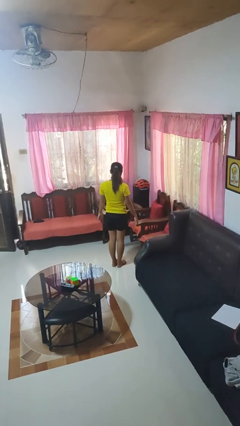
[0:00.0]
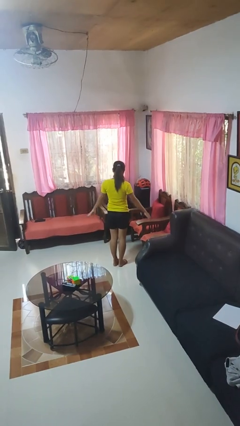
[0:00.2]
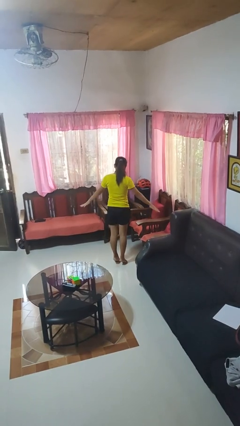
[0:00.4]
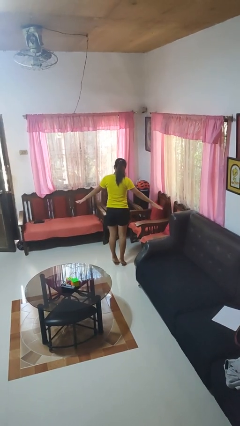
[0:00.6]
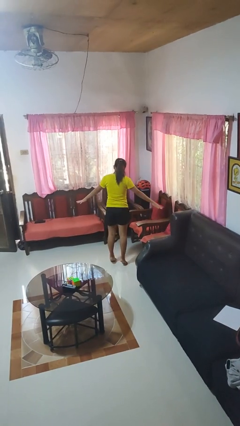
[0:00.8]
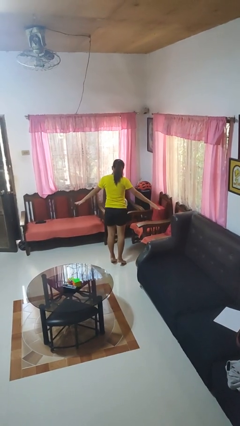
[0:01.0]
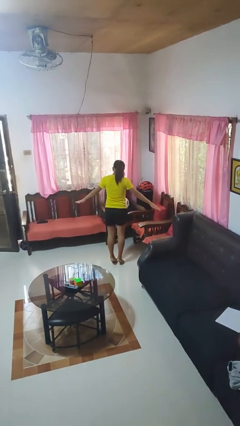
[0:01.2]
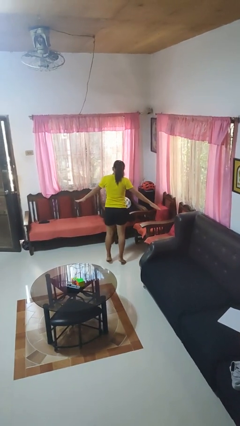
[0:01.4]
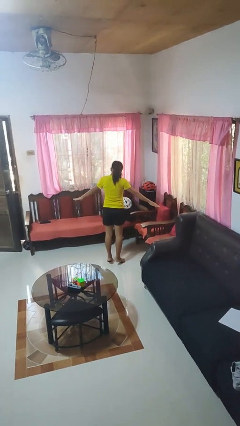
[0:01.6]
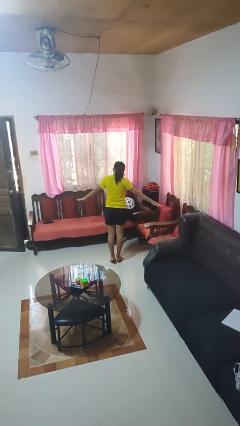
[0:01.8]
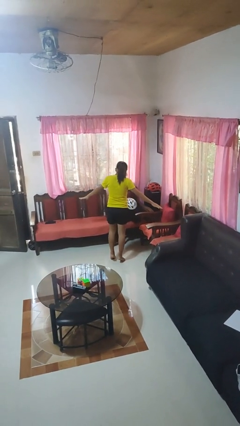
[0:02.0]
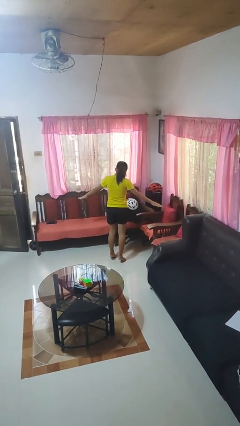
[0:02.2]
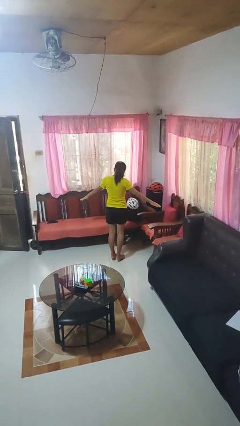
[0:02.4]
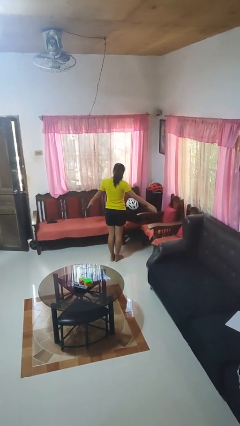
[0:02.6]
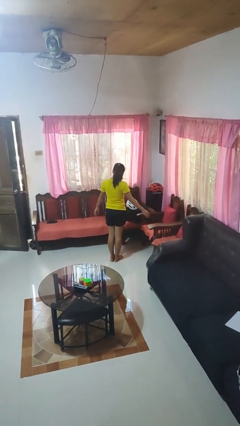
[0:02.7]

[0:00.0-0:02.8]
person walks tiptoe

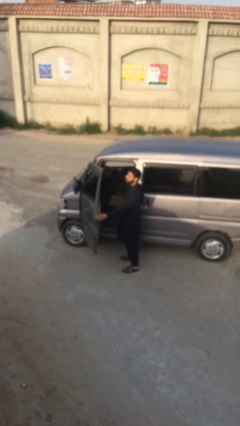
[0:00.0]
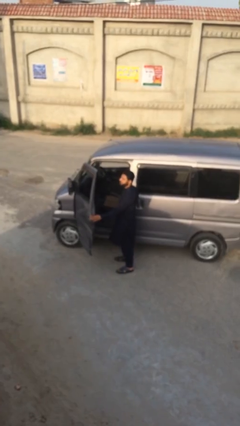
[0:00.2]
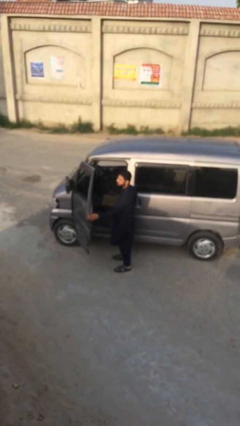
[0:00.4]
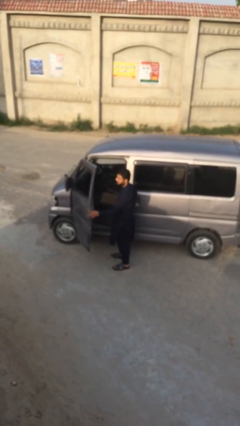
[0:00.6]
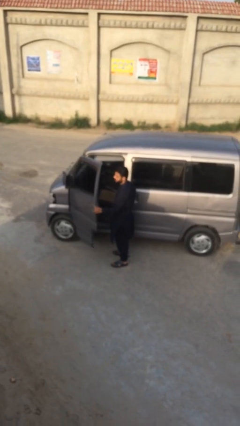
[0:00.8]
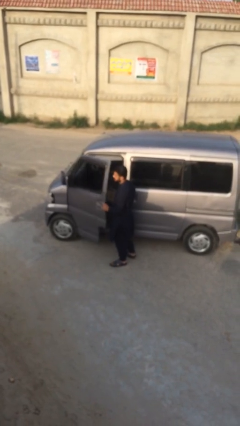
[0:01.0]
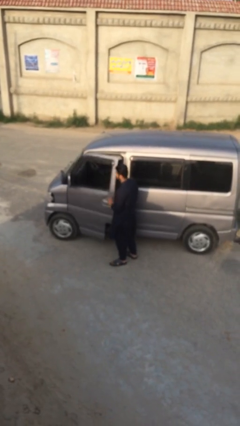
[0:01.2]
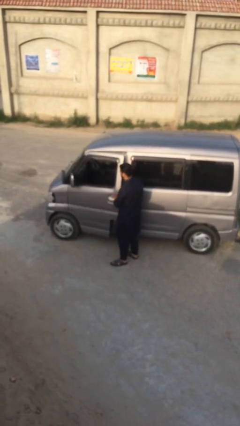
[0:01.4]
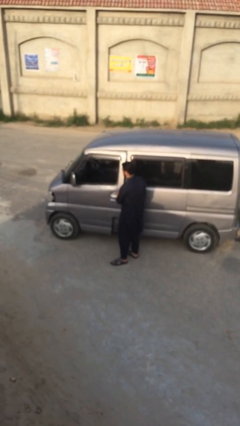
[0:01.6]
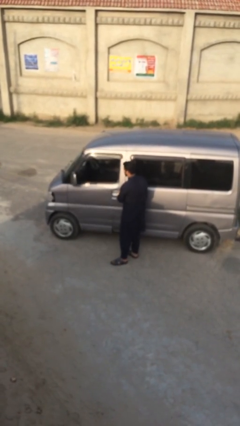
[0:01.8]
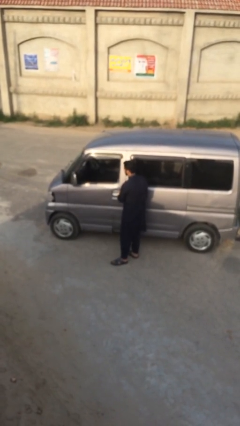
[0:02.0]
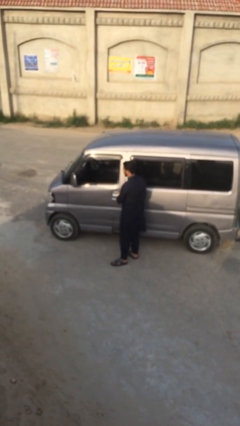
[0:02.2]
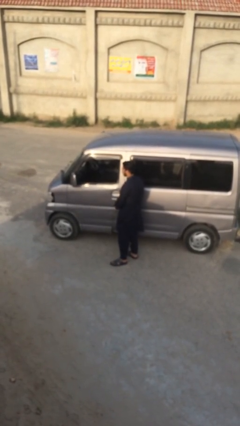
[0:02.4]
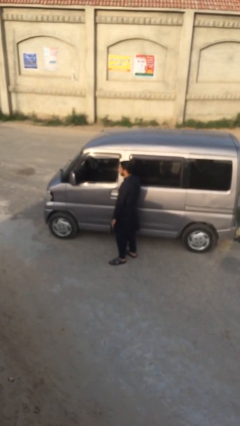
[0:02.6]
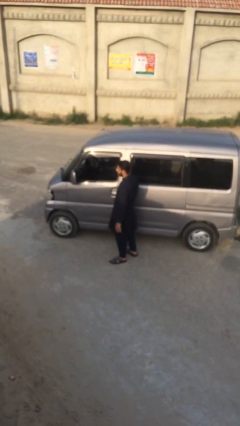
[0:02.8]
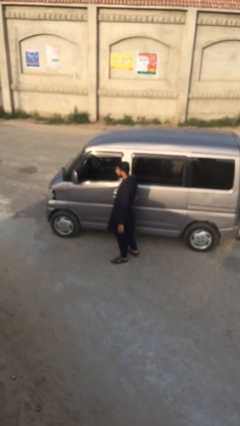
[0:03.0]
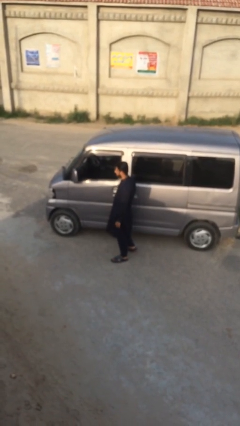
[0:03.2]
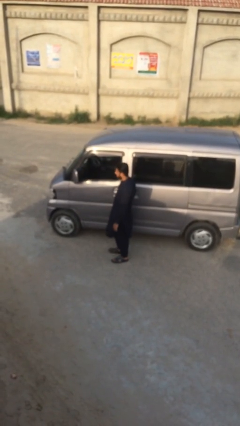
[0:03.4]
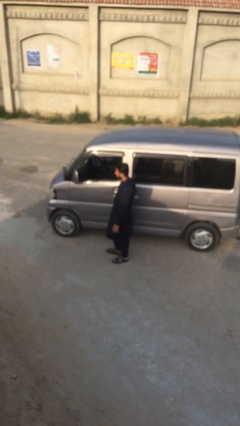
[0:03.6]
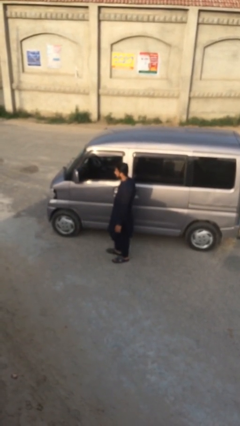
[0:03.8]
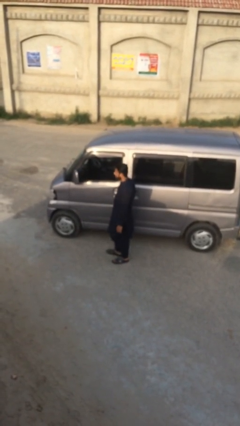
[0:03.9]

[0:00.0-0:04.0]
person closes car door

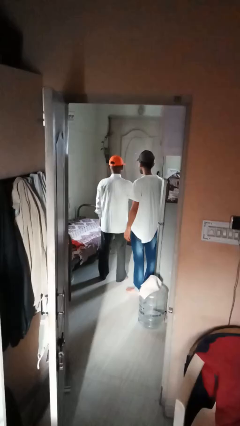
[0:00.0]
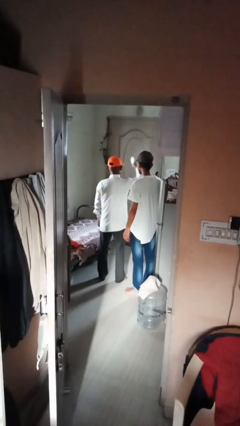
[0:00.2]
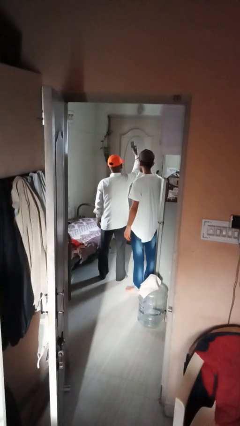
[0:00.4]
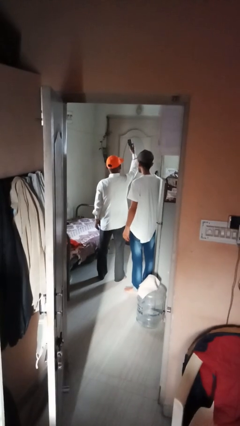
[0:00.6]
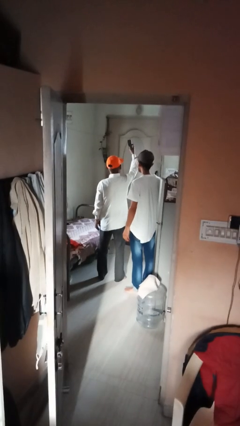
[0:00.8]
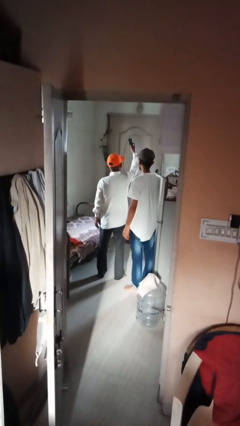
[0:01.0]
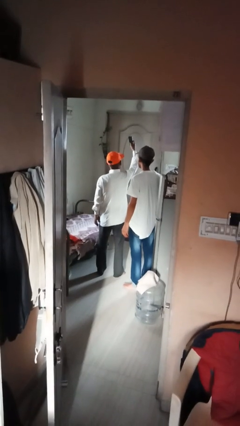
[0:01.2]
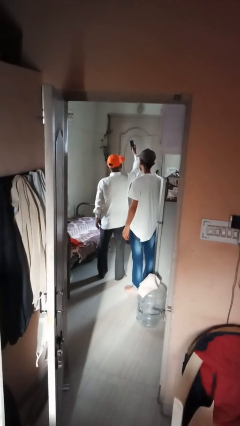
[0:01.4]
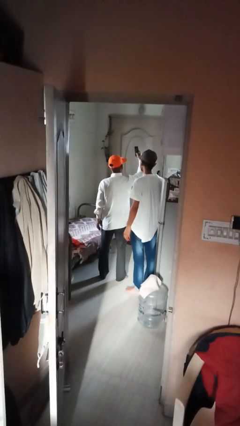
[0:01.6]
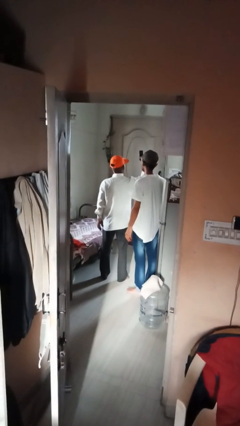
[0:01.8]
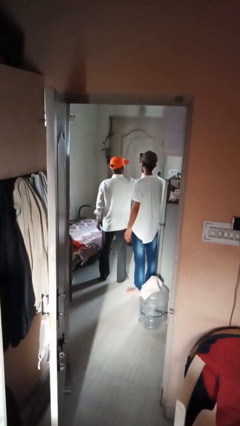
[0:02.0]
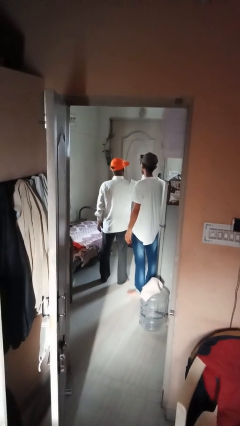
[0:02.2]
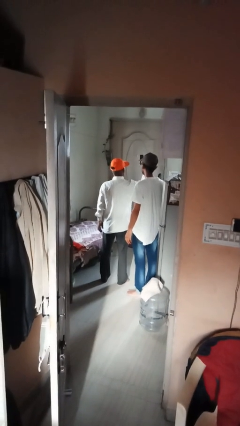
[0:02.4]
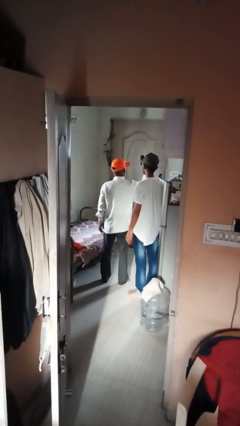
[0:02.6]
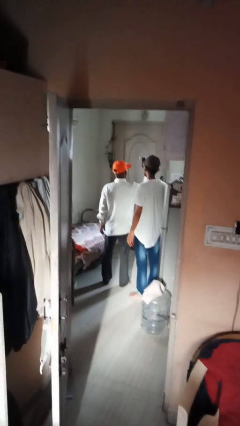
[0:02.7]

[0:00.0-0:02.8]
person takes selfie with person

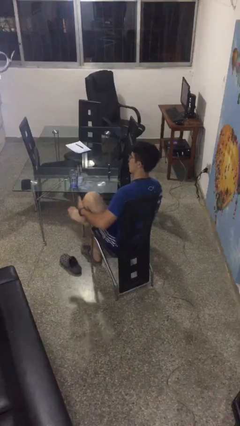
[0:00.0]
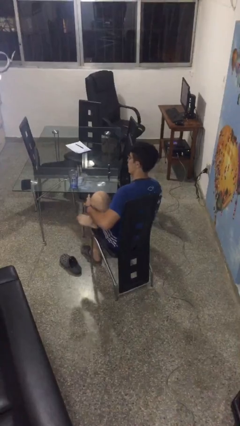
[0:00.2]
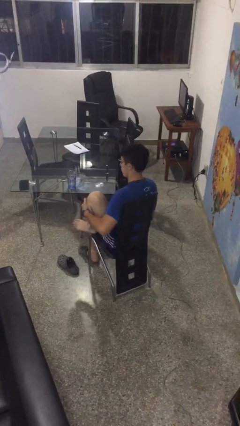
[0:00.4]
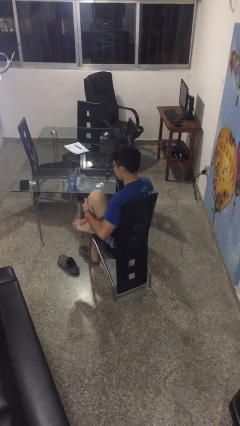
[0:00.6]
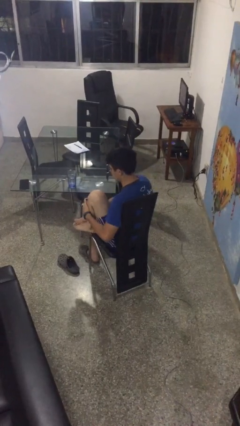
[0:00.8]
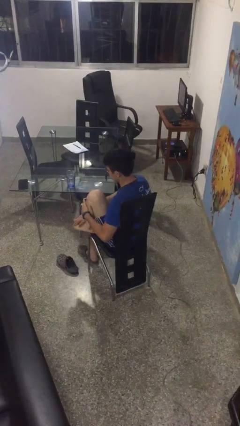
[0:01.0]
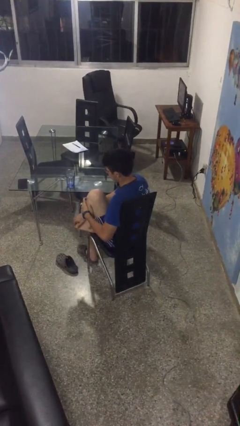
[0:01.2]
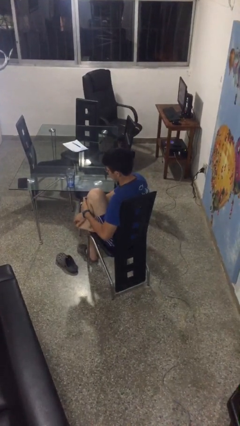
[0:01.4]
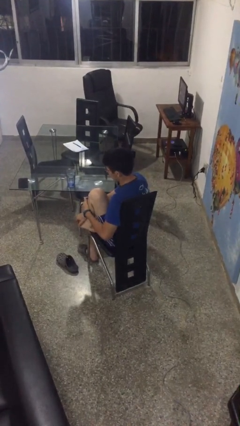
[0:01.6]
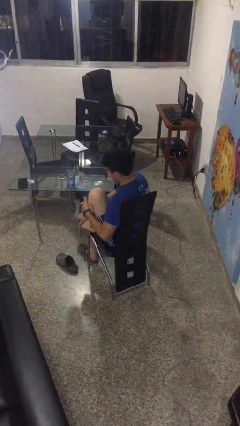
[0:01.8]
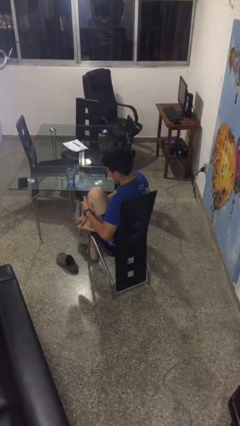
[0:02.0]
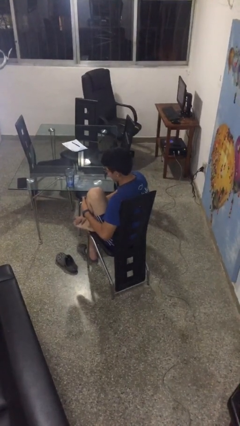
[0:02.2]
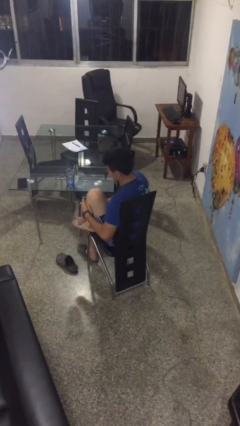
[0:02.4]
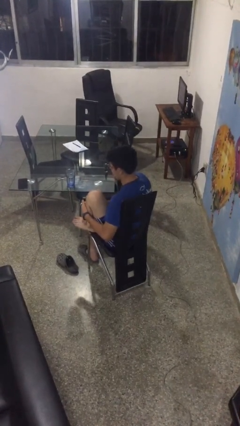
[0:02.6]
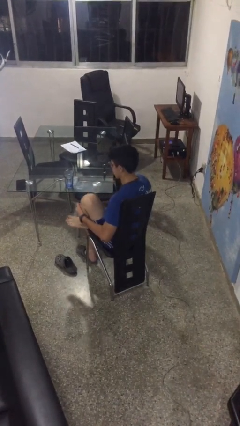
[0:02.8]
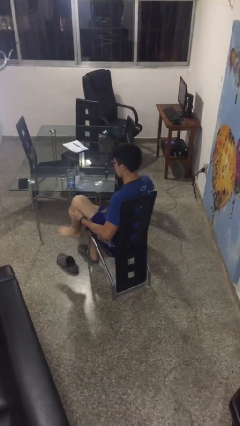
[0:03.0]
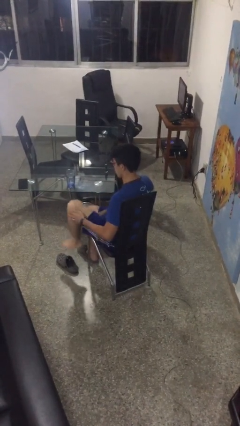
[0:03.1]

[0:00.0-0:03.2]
person rubs foot

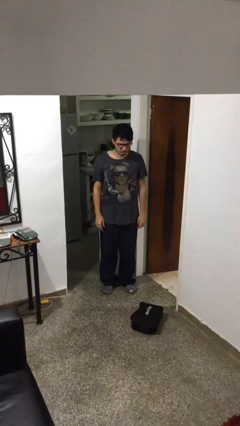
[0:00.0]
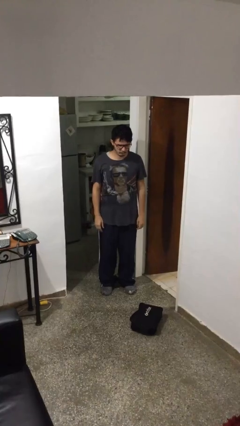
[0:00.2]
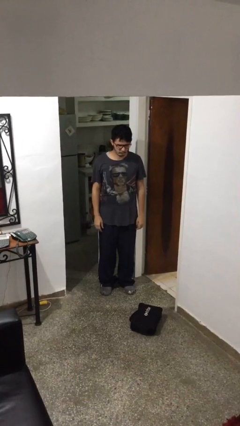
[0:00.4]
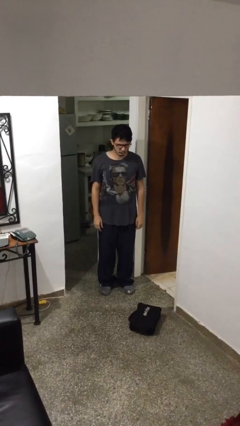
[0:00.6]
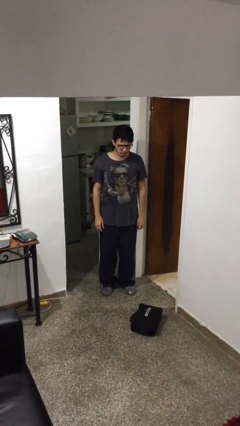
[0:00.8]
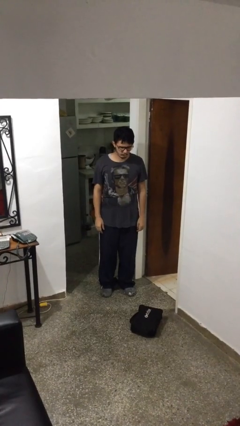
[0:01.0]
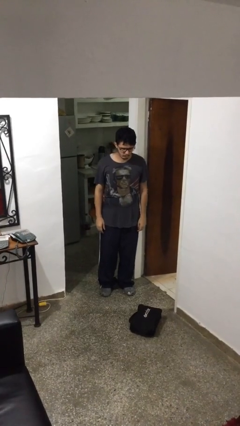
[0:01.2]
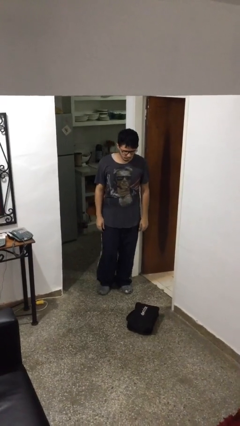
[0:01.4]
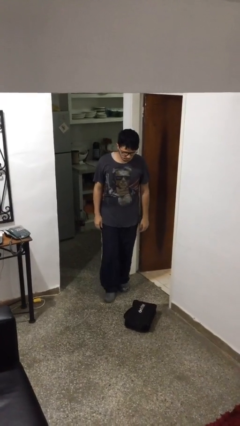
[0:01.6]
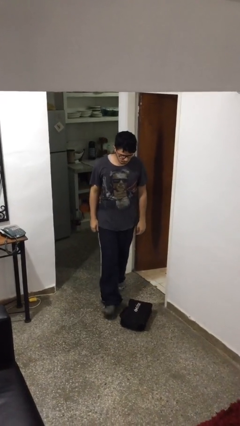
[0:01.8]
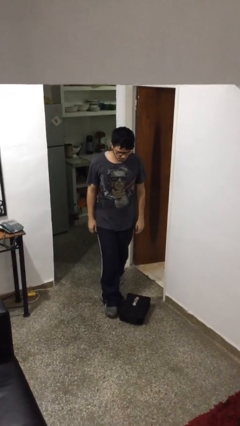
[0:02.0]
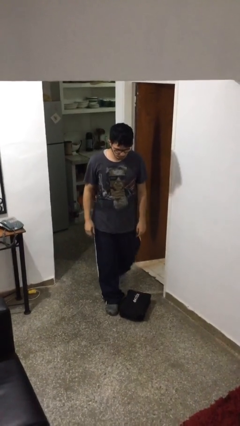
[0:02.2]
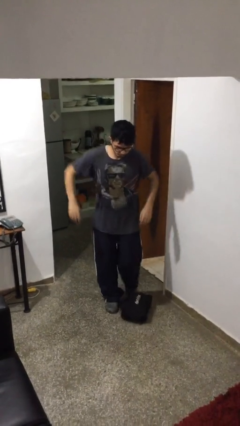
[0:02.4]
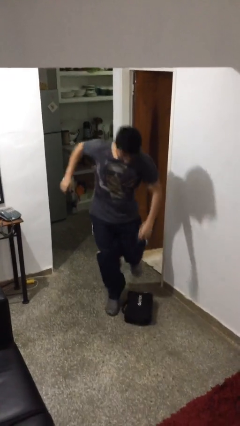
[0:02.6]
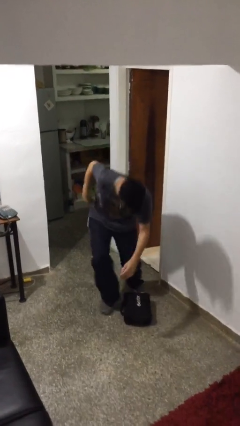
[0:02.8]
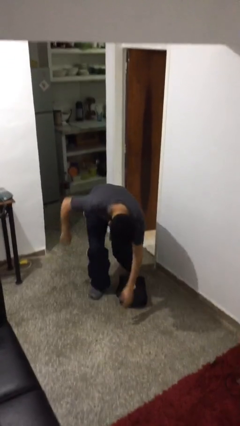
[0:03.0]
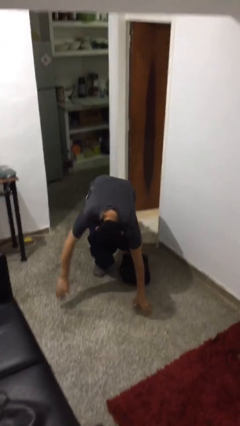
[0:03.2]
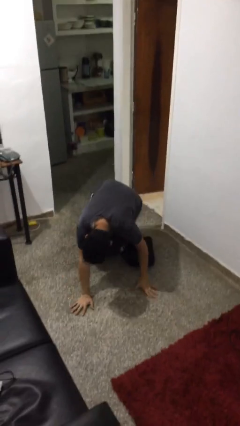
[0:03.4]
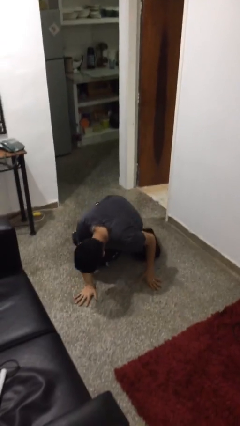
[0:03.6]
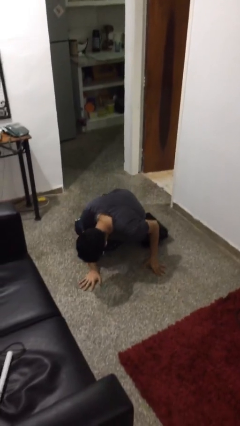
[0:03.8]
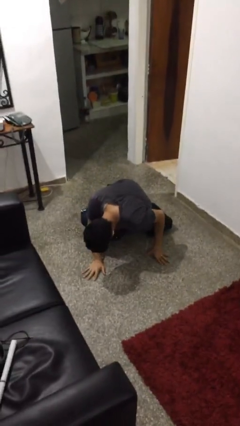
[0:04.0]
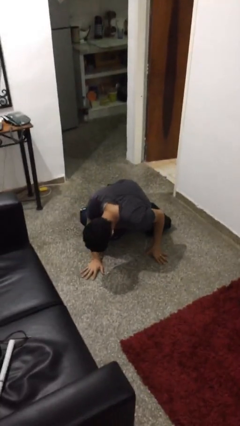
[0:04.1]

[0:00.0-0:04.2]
person trips on object on floor

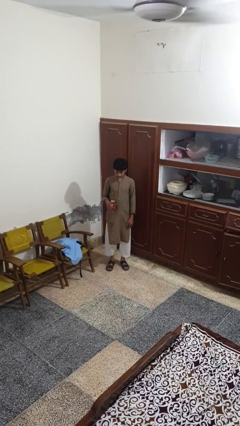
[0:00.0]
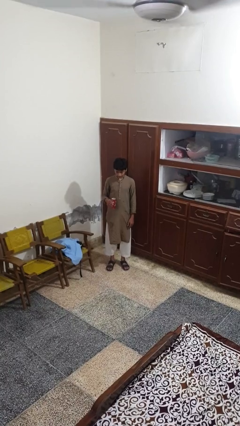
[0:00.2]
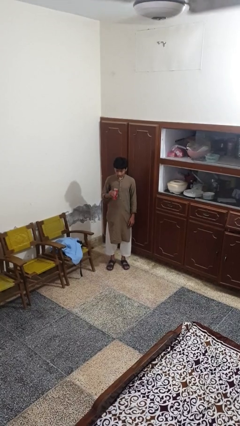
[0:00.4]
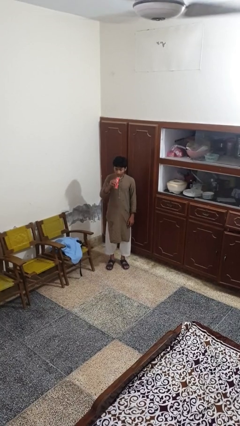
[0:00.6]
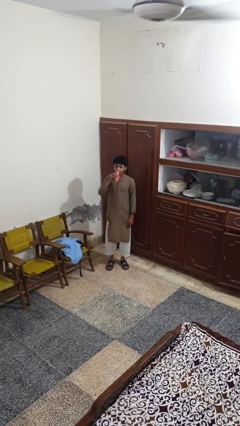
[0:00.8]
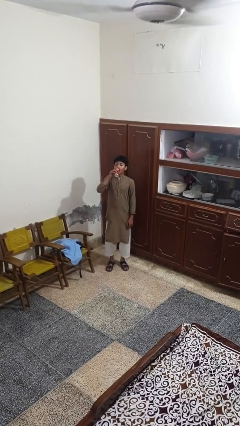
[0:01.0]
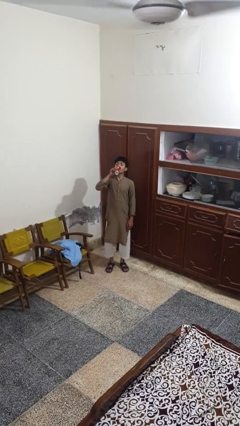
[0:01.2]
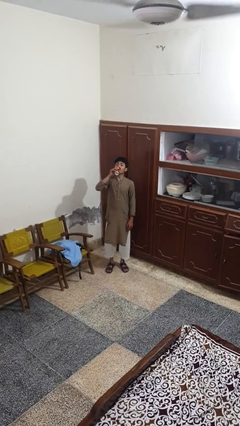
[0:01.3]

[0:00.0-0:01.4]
person drinks from beverage can
